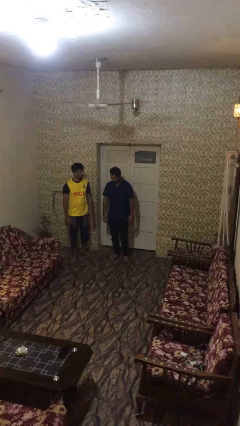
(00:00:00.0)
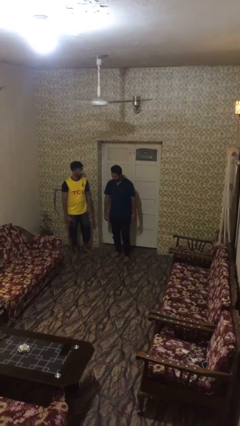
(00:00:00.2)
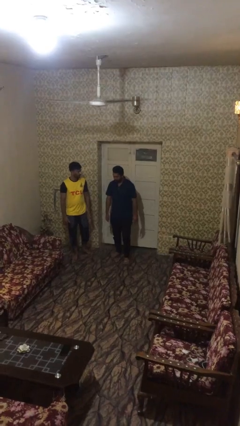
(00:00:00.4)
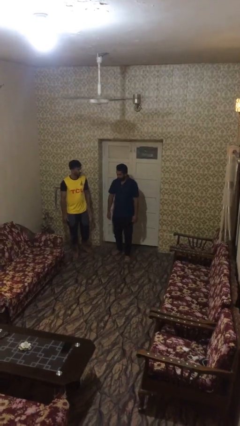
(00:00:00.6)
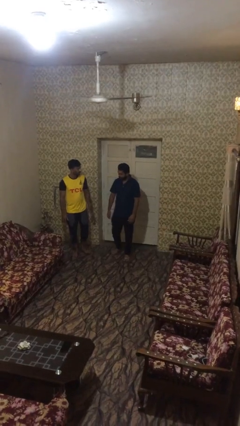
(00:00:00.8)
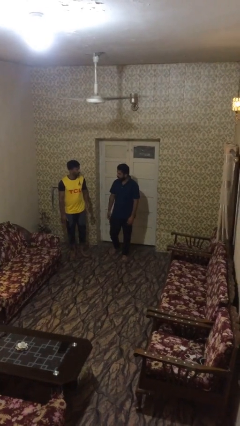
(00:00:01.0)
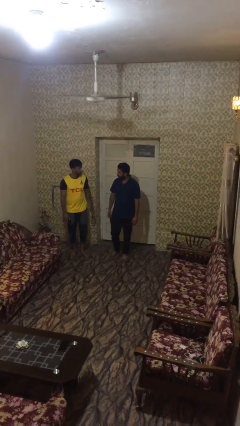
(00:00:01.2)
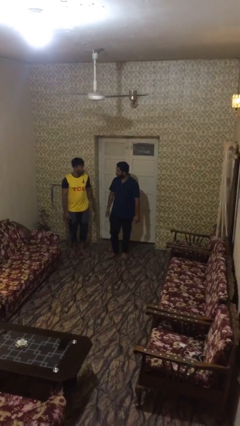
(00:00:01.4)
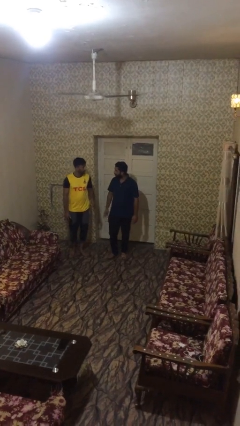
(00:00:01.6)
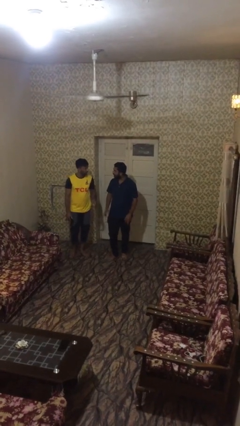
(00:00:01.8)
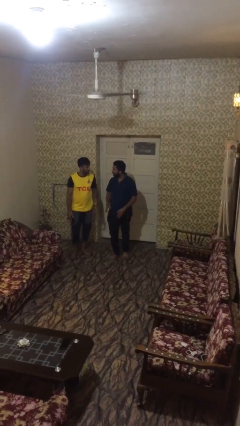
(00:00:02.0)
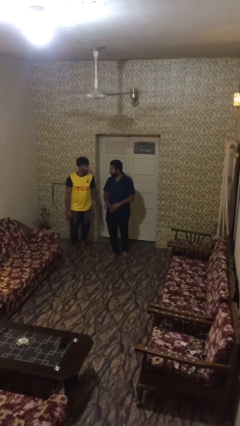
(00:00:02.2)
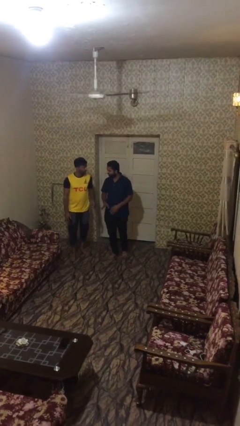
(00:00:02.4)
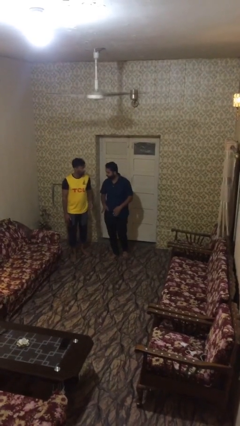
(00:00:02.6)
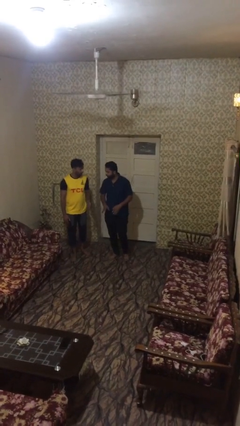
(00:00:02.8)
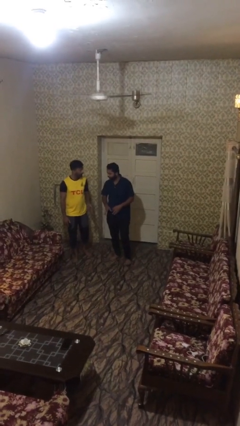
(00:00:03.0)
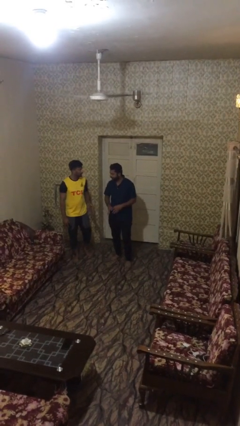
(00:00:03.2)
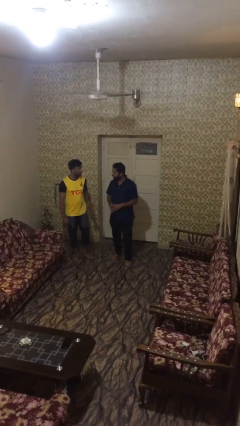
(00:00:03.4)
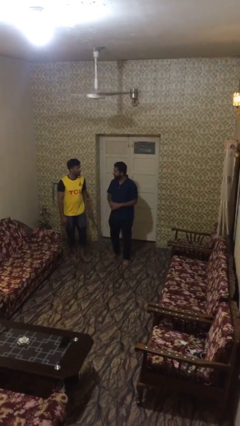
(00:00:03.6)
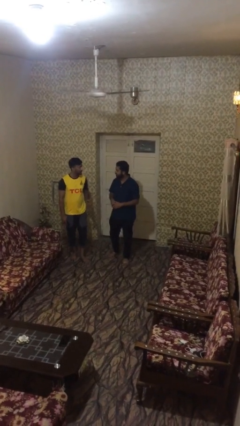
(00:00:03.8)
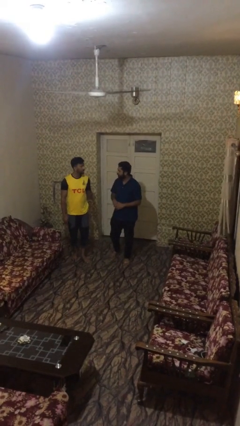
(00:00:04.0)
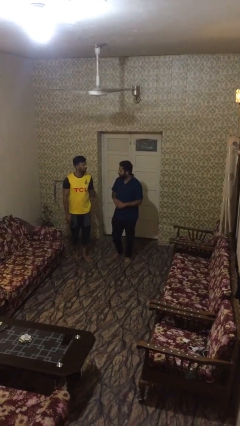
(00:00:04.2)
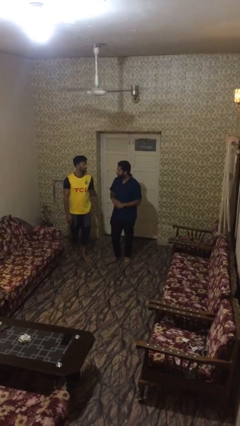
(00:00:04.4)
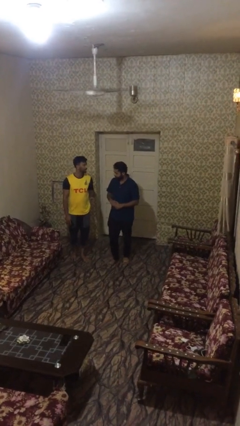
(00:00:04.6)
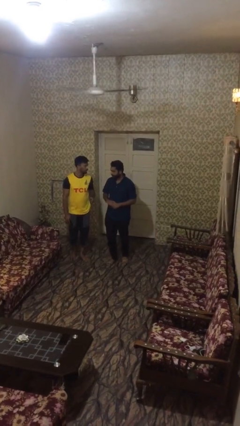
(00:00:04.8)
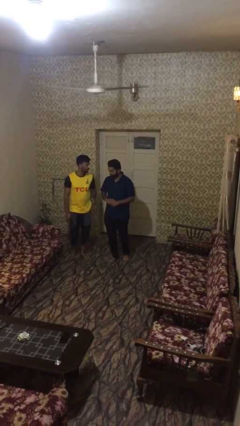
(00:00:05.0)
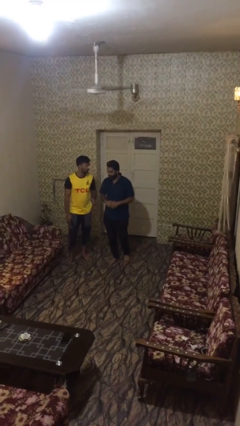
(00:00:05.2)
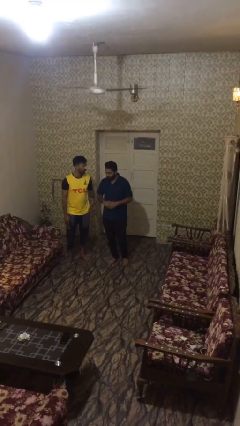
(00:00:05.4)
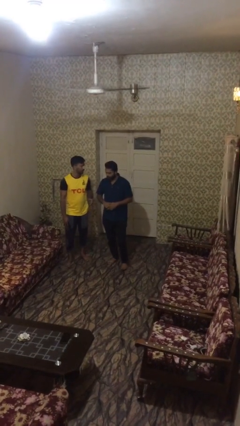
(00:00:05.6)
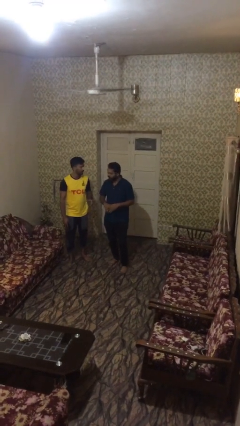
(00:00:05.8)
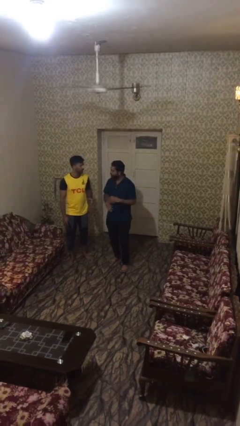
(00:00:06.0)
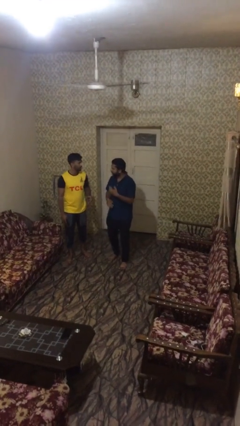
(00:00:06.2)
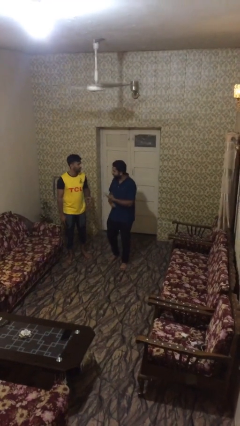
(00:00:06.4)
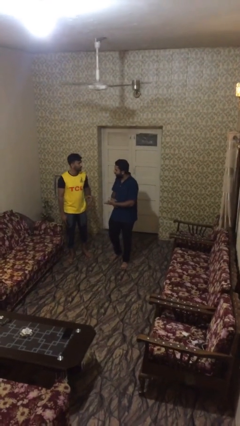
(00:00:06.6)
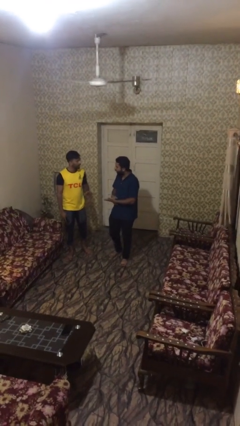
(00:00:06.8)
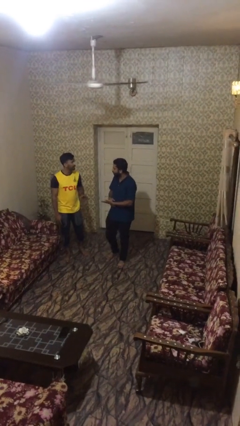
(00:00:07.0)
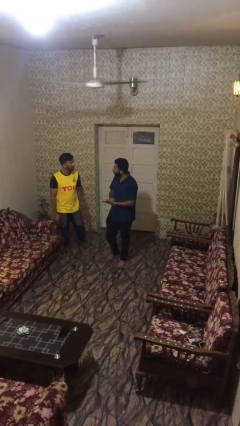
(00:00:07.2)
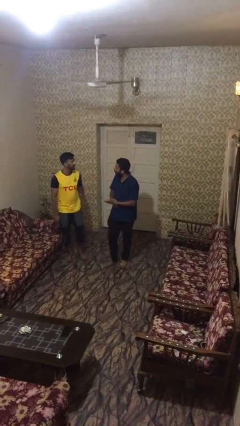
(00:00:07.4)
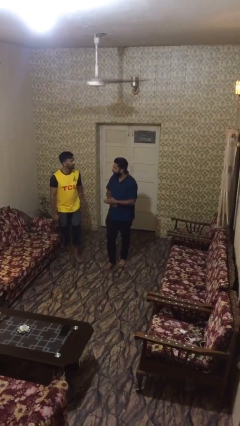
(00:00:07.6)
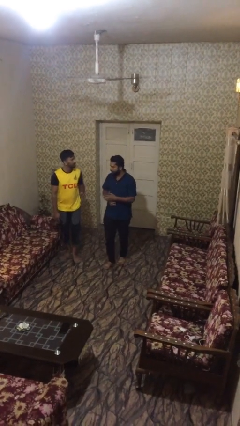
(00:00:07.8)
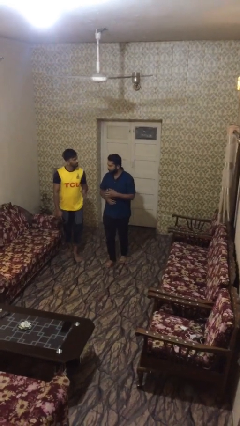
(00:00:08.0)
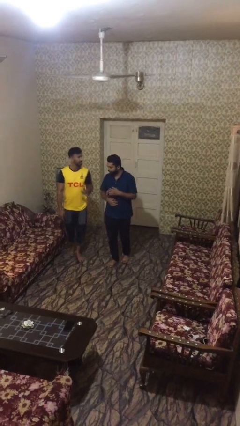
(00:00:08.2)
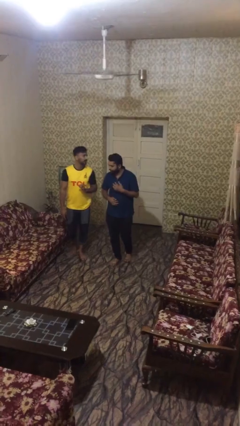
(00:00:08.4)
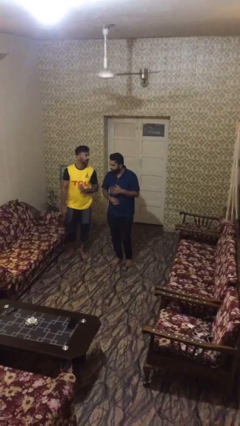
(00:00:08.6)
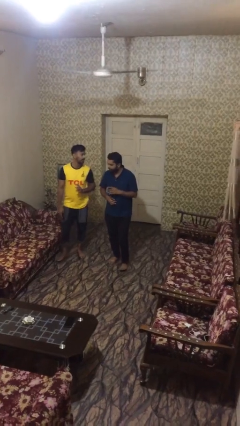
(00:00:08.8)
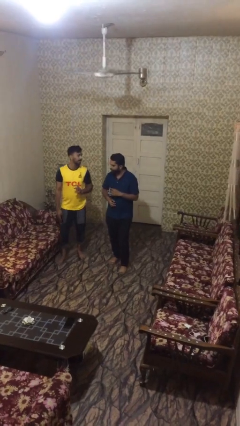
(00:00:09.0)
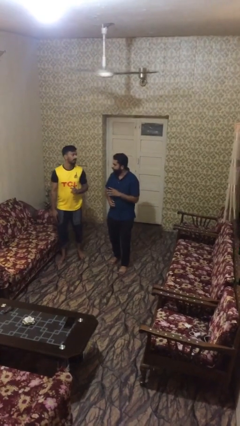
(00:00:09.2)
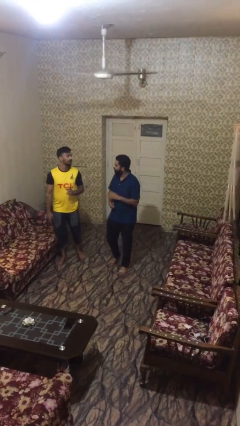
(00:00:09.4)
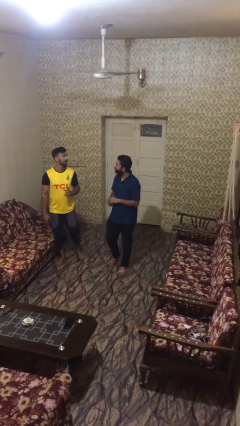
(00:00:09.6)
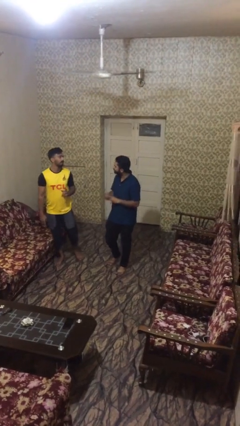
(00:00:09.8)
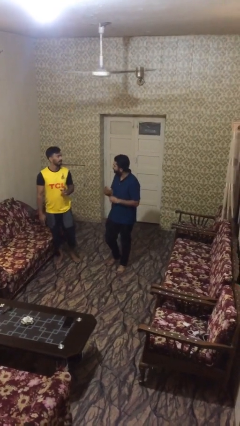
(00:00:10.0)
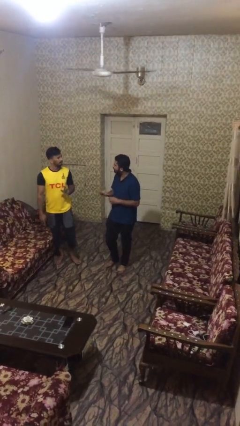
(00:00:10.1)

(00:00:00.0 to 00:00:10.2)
person talks to person

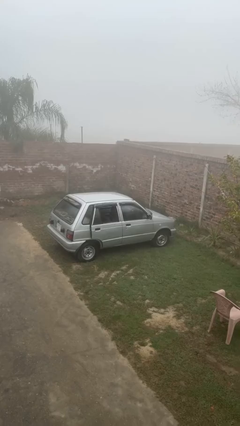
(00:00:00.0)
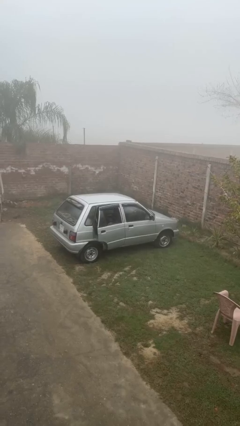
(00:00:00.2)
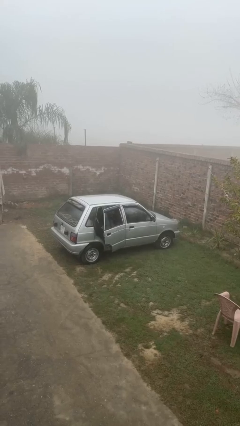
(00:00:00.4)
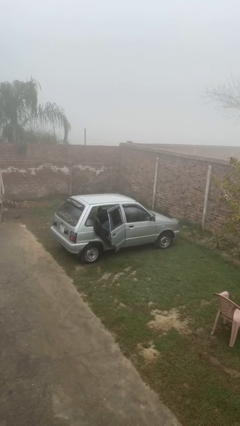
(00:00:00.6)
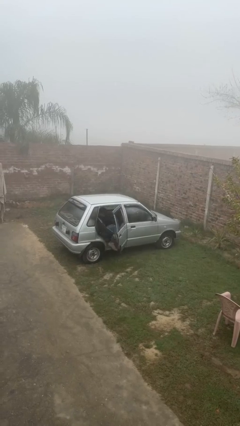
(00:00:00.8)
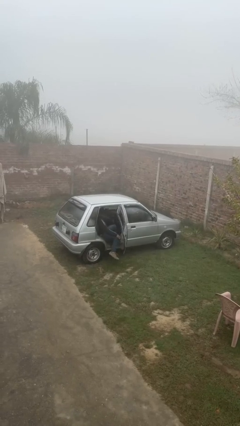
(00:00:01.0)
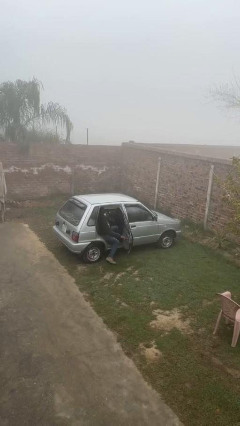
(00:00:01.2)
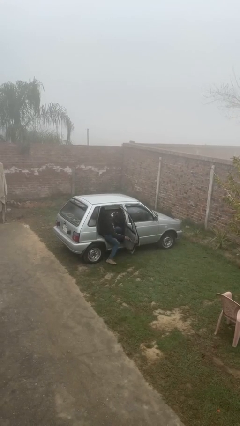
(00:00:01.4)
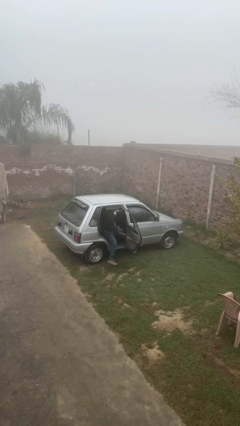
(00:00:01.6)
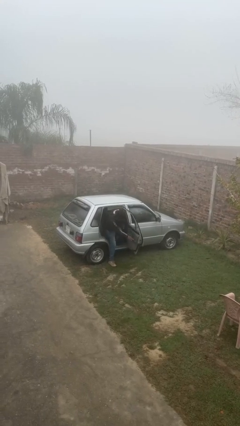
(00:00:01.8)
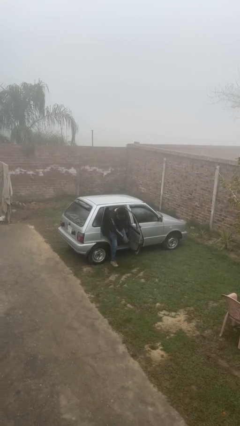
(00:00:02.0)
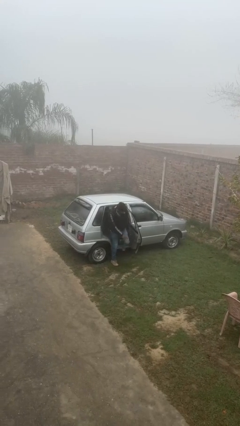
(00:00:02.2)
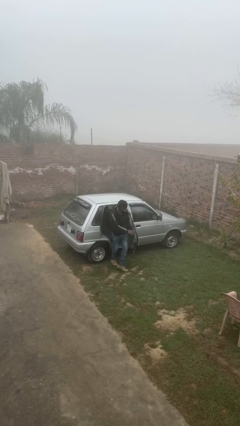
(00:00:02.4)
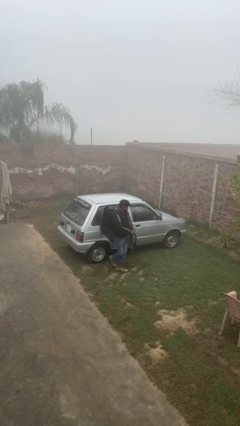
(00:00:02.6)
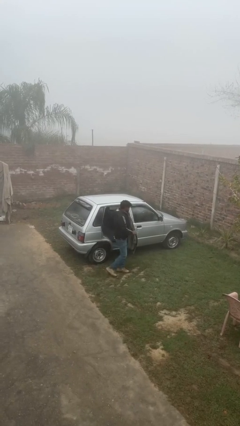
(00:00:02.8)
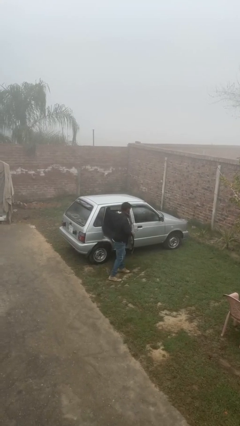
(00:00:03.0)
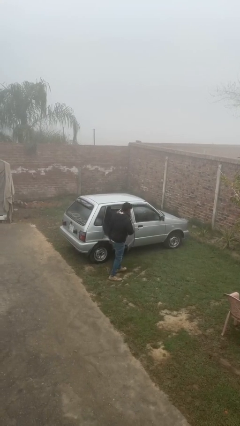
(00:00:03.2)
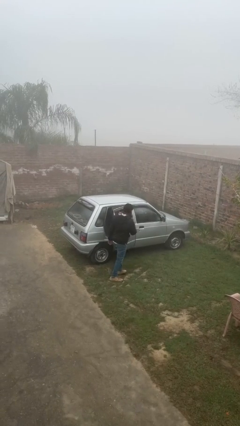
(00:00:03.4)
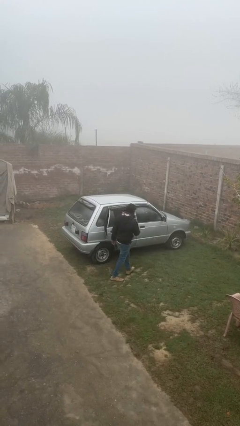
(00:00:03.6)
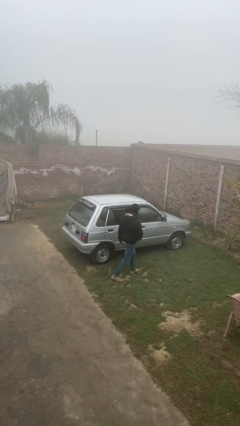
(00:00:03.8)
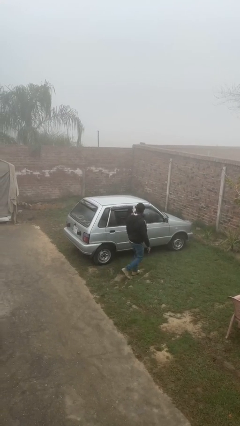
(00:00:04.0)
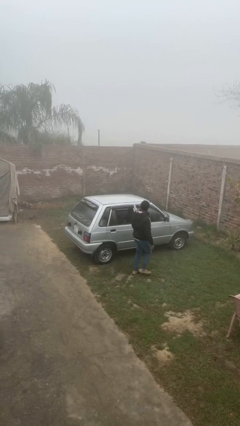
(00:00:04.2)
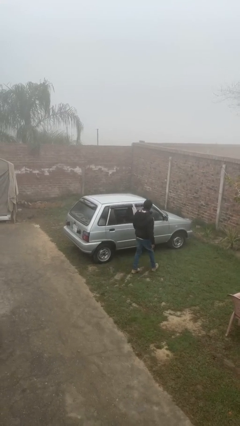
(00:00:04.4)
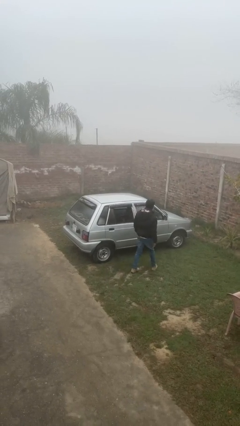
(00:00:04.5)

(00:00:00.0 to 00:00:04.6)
car drops off person

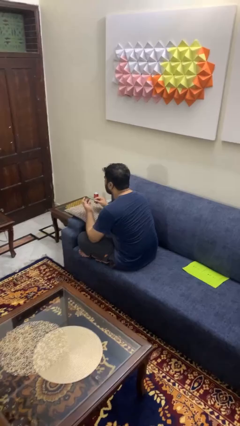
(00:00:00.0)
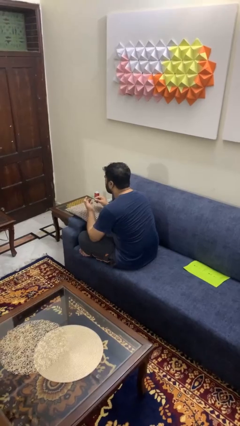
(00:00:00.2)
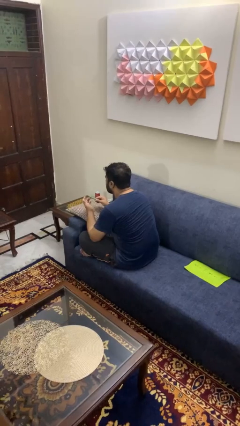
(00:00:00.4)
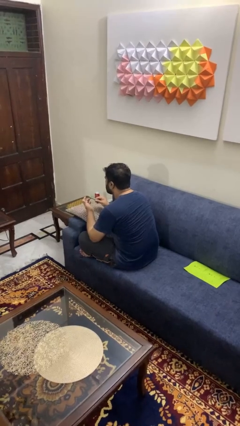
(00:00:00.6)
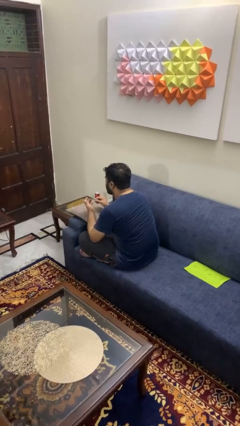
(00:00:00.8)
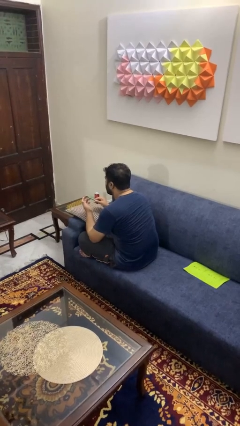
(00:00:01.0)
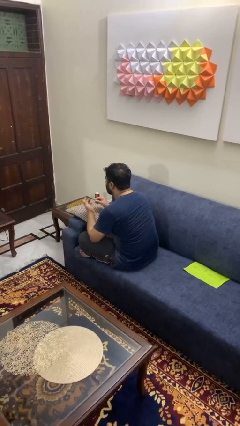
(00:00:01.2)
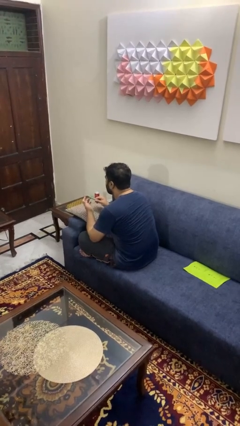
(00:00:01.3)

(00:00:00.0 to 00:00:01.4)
person files fingernails

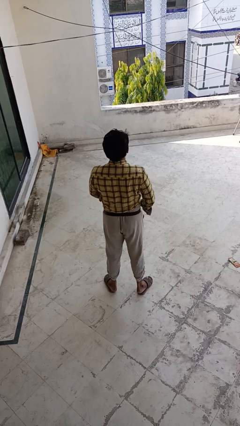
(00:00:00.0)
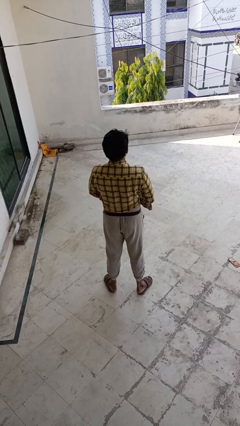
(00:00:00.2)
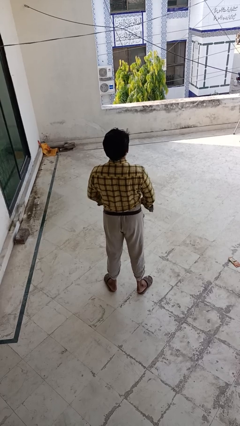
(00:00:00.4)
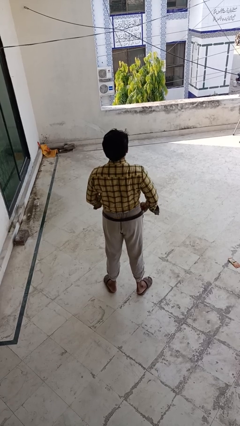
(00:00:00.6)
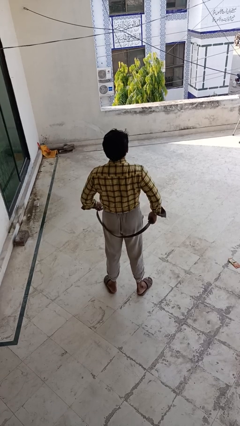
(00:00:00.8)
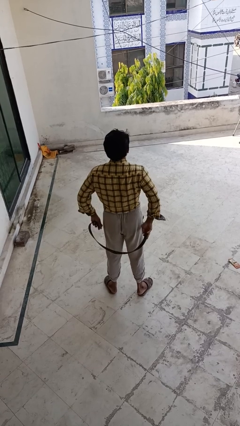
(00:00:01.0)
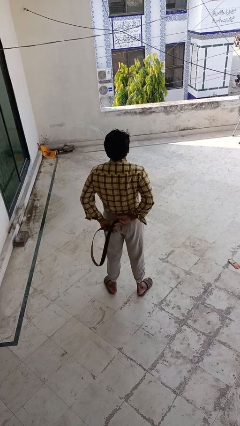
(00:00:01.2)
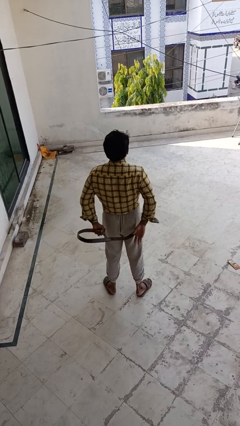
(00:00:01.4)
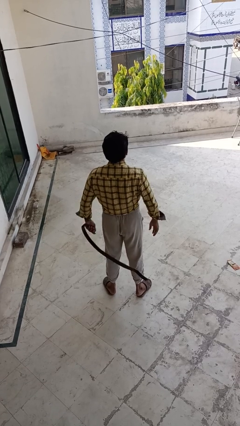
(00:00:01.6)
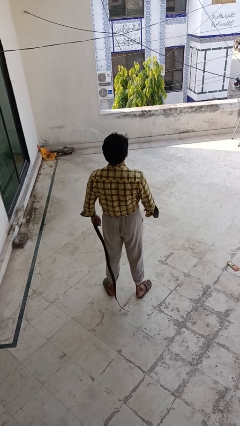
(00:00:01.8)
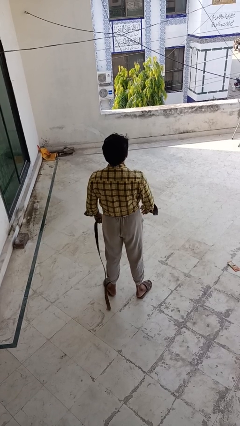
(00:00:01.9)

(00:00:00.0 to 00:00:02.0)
person takes off belt
